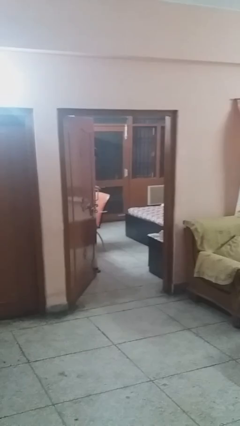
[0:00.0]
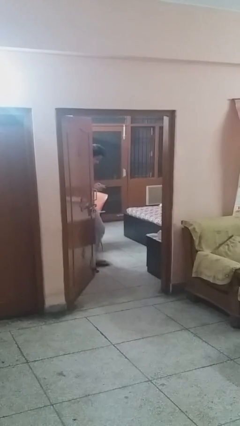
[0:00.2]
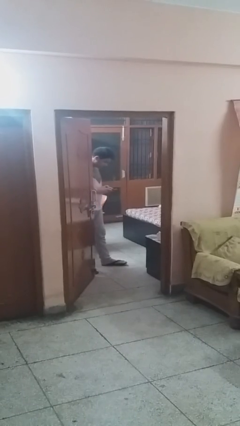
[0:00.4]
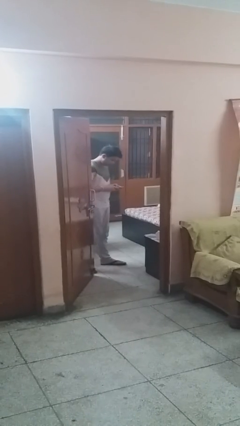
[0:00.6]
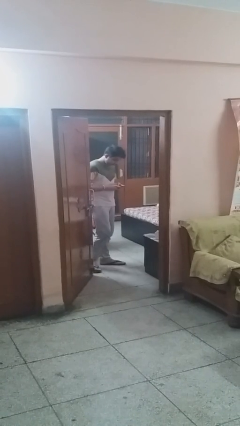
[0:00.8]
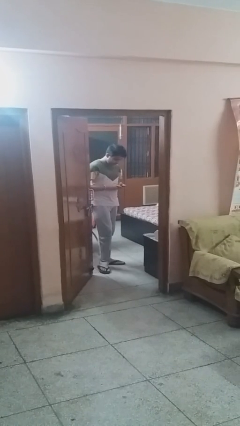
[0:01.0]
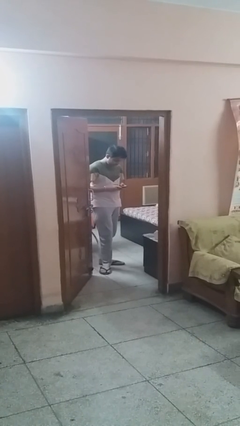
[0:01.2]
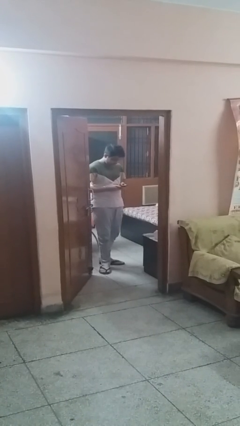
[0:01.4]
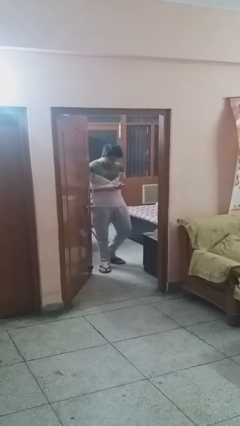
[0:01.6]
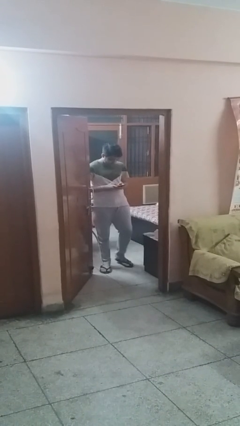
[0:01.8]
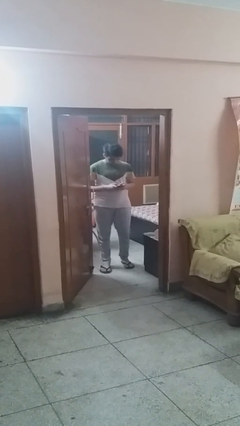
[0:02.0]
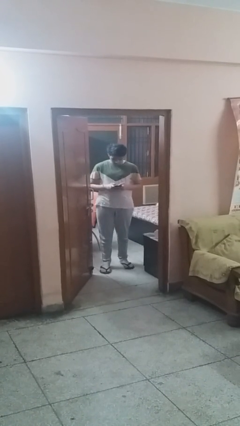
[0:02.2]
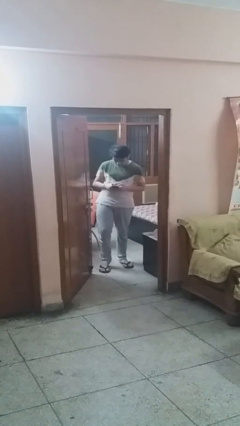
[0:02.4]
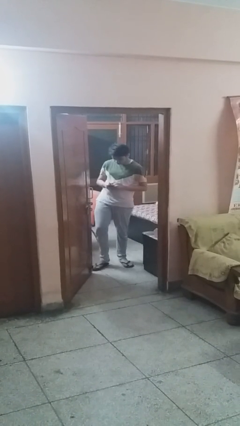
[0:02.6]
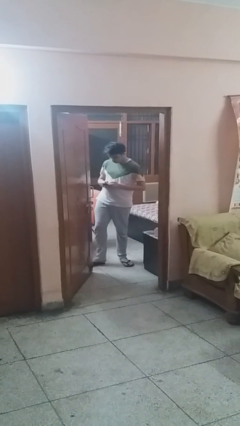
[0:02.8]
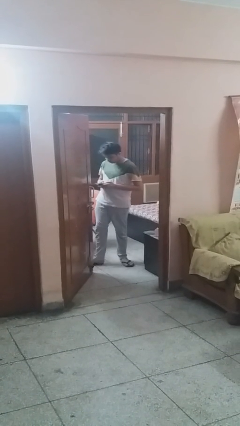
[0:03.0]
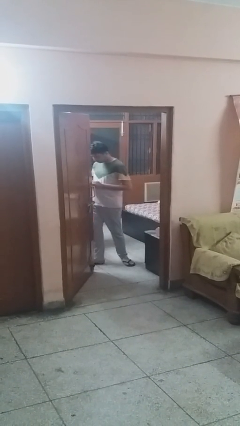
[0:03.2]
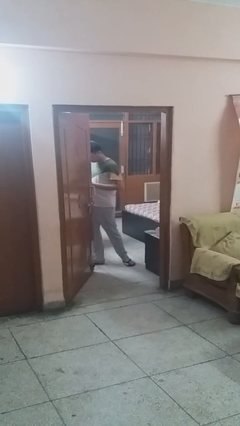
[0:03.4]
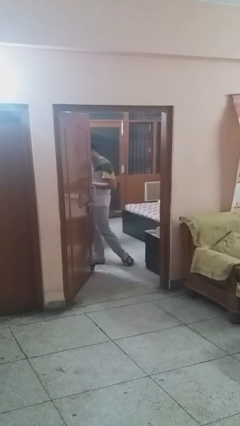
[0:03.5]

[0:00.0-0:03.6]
person enters scene through structure

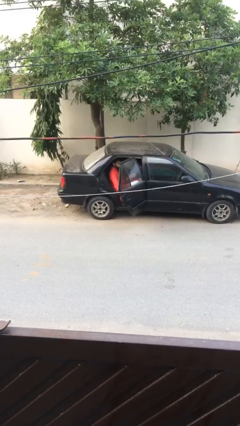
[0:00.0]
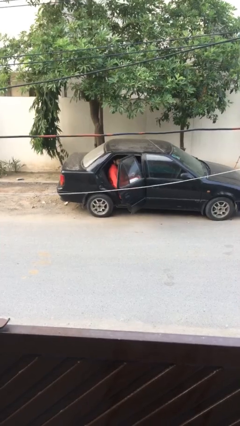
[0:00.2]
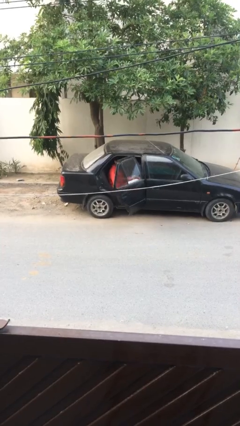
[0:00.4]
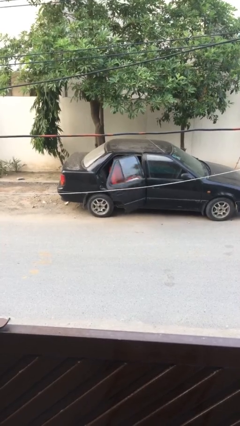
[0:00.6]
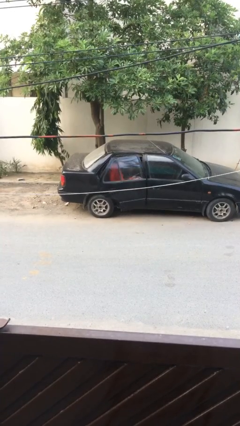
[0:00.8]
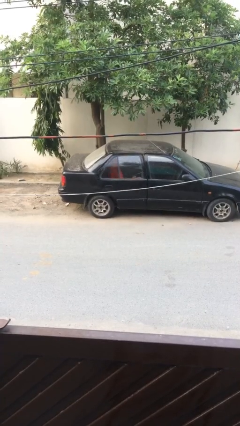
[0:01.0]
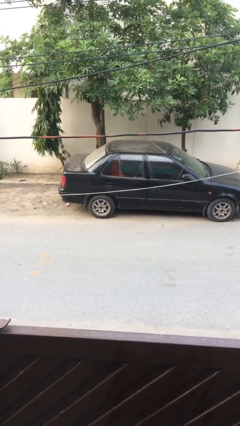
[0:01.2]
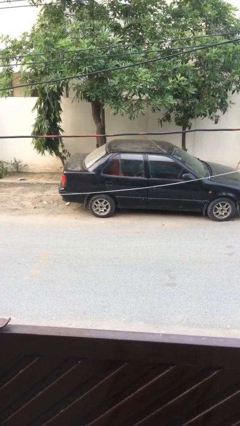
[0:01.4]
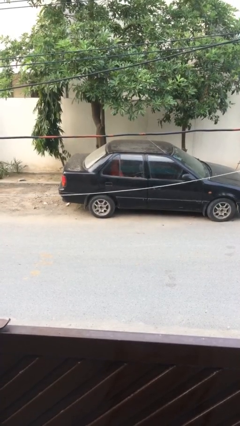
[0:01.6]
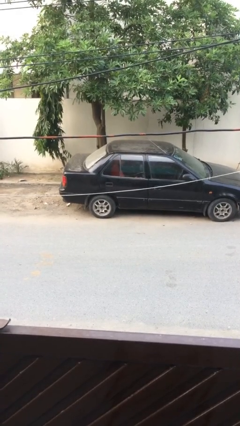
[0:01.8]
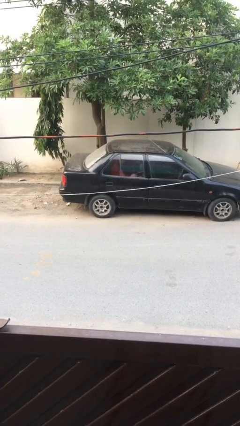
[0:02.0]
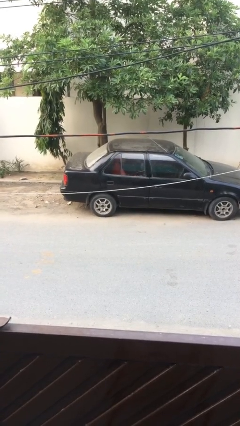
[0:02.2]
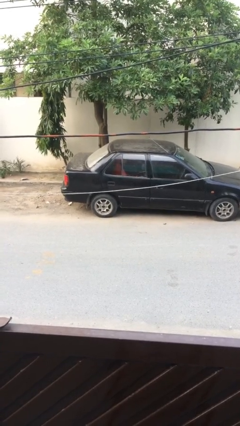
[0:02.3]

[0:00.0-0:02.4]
person closes car door

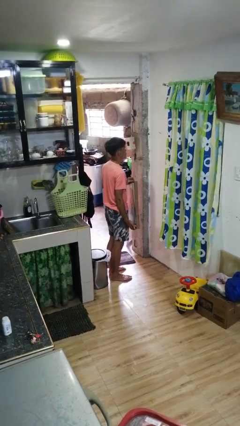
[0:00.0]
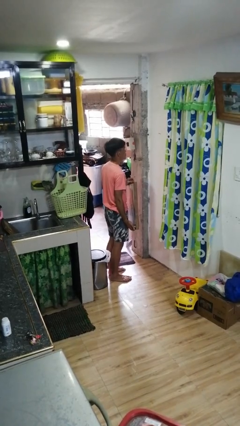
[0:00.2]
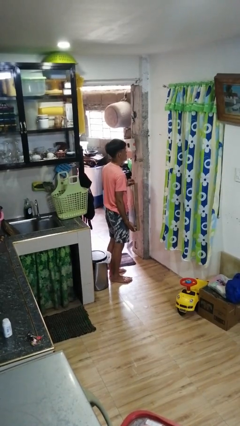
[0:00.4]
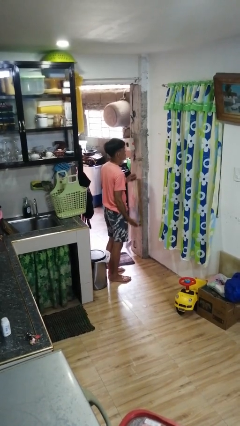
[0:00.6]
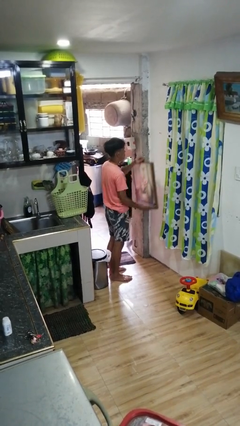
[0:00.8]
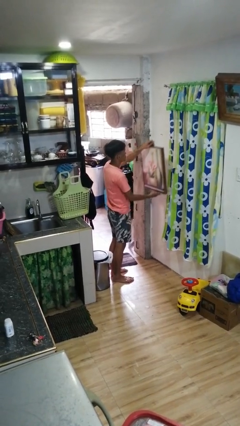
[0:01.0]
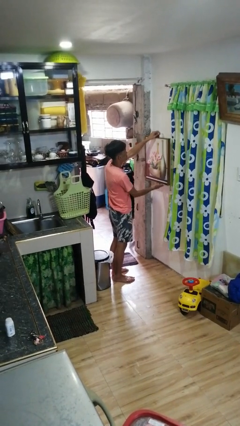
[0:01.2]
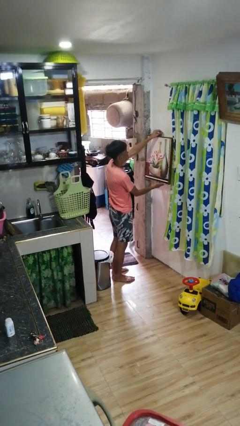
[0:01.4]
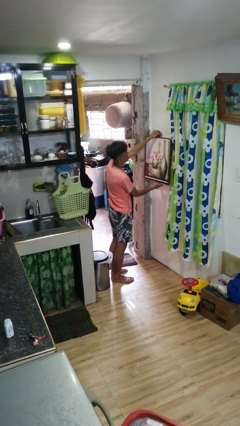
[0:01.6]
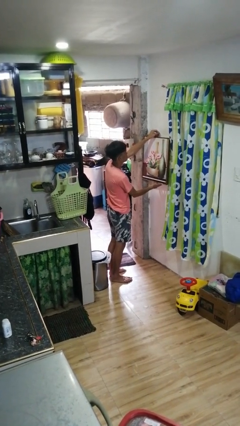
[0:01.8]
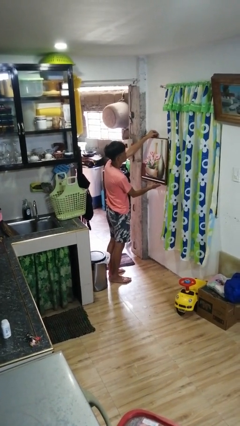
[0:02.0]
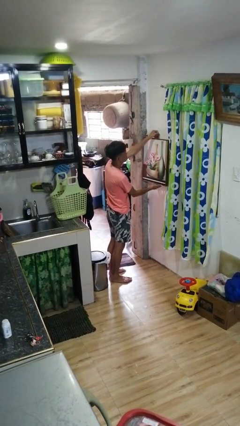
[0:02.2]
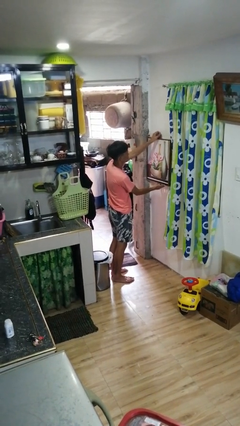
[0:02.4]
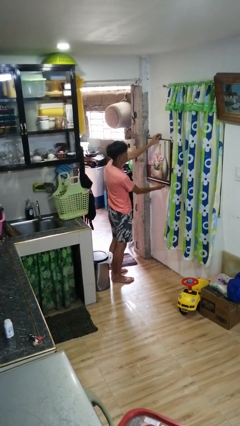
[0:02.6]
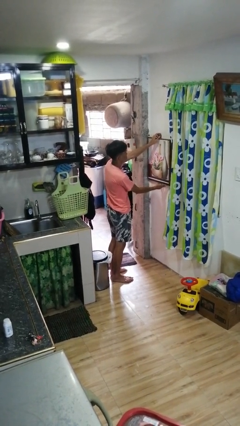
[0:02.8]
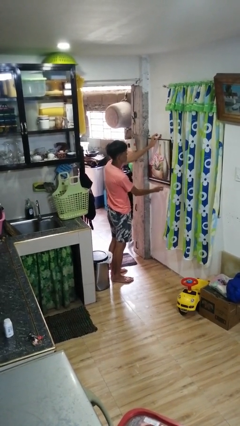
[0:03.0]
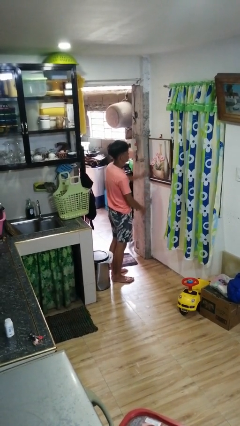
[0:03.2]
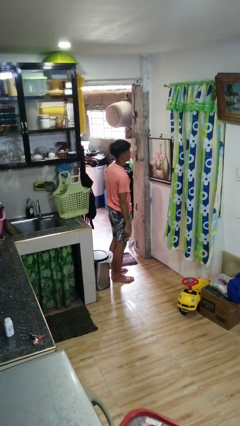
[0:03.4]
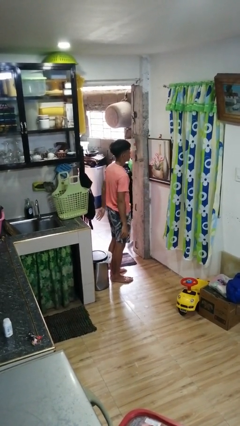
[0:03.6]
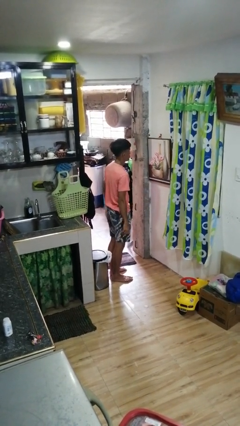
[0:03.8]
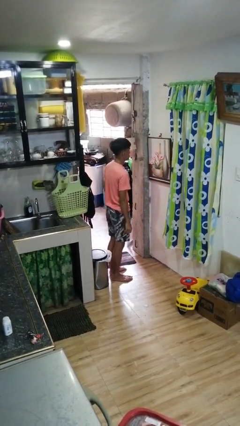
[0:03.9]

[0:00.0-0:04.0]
person puts up picture frame

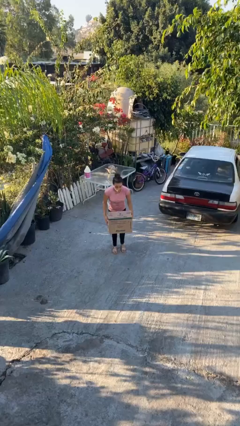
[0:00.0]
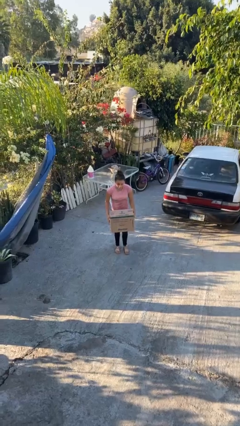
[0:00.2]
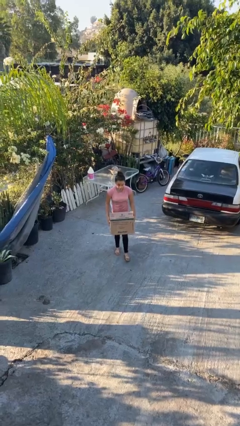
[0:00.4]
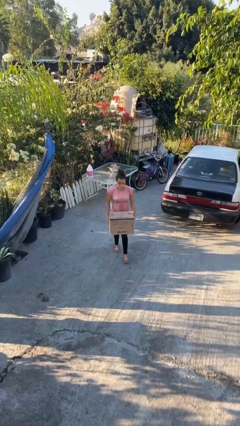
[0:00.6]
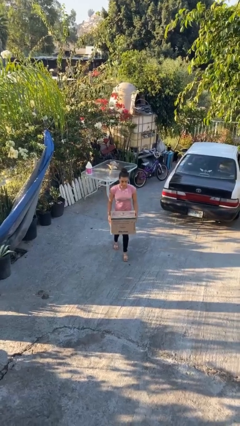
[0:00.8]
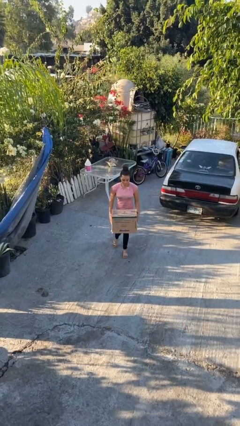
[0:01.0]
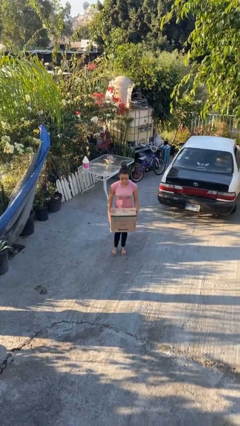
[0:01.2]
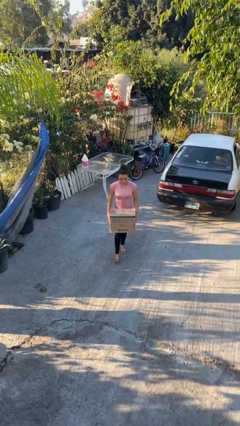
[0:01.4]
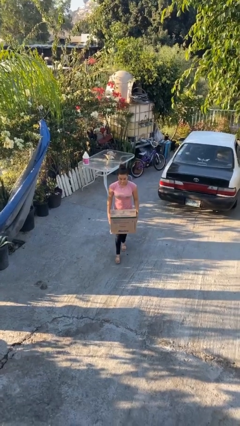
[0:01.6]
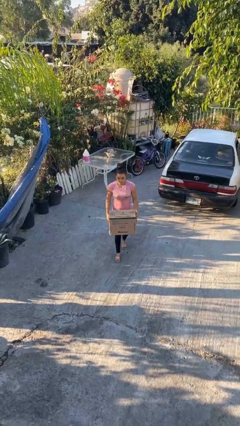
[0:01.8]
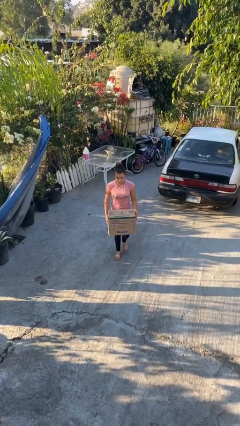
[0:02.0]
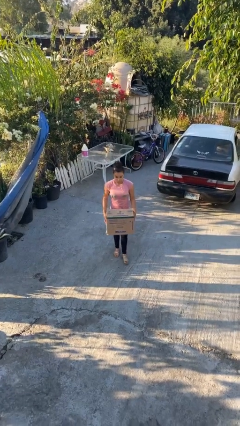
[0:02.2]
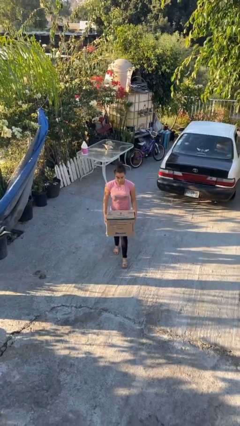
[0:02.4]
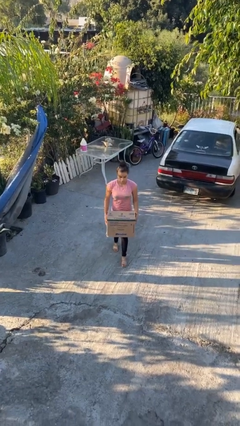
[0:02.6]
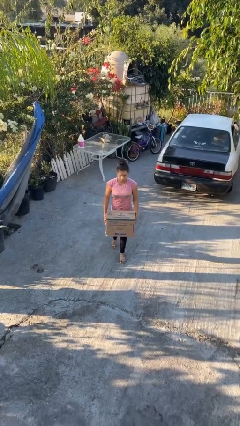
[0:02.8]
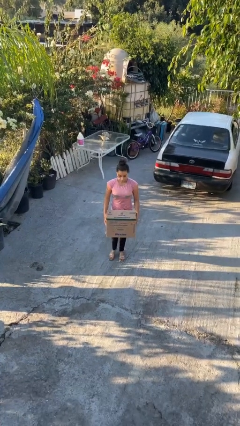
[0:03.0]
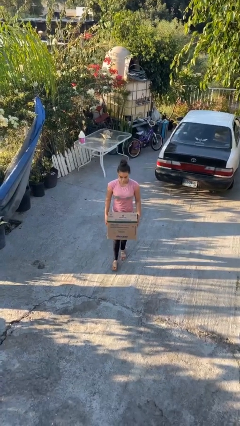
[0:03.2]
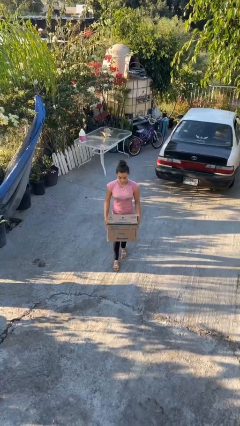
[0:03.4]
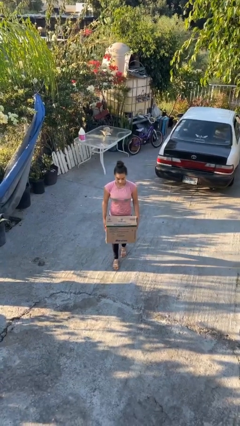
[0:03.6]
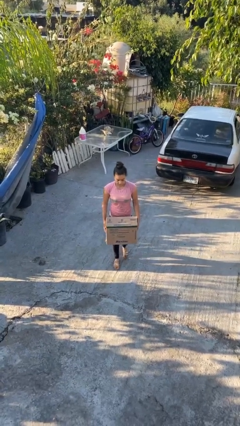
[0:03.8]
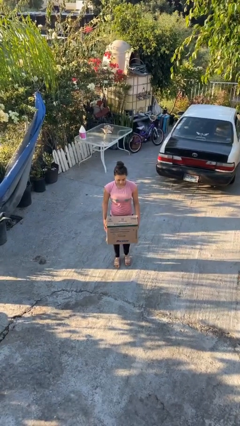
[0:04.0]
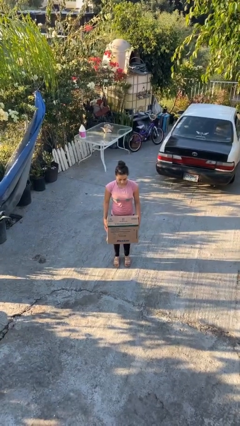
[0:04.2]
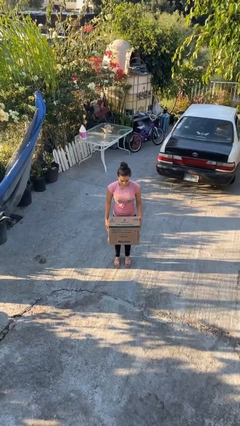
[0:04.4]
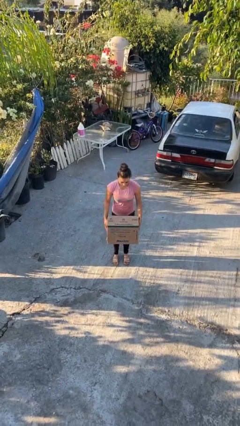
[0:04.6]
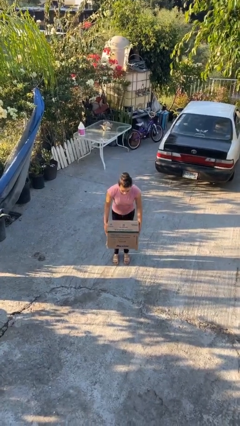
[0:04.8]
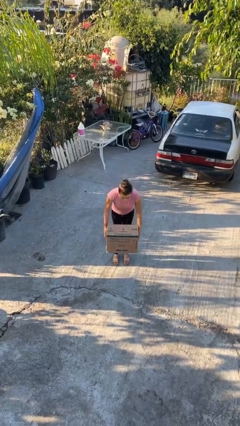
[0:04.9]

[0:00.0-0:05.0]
person carries heavy object

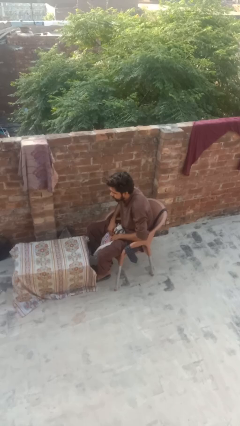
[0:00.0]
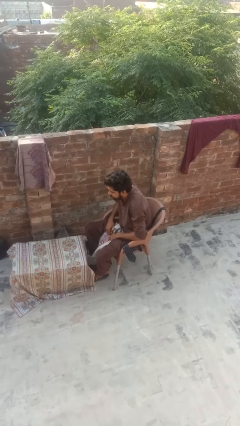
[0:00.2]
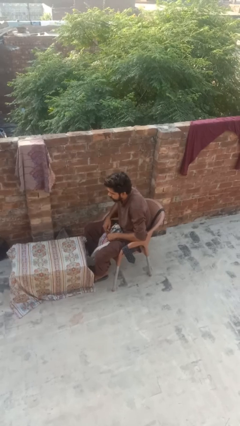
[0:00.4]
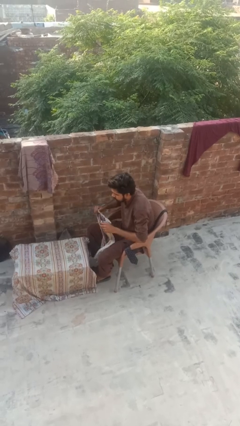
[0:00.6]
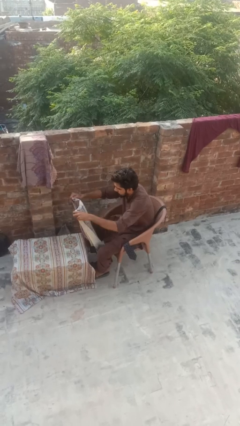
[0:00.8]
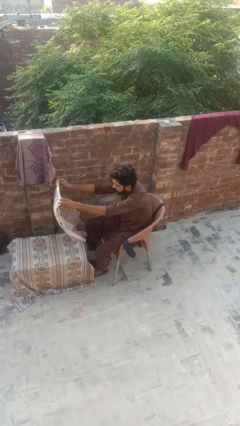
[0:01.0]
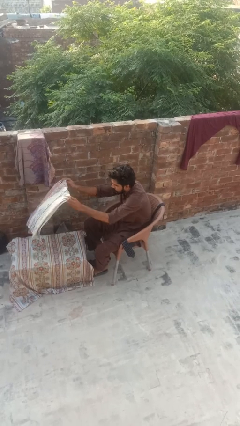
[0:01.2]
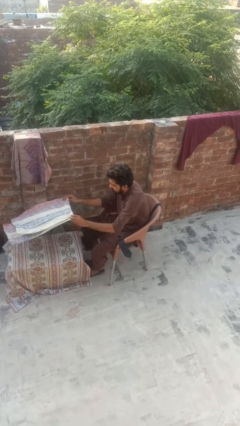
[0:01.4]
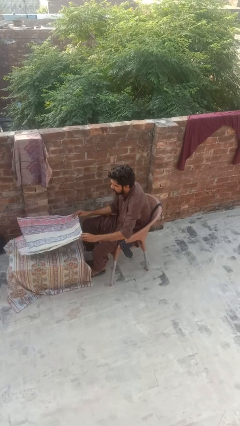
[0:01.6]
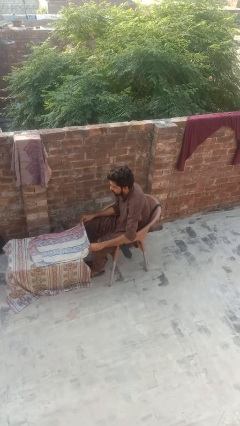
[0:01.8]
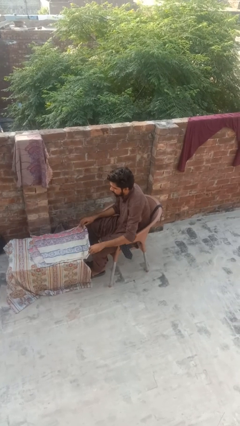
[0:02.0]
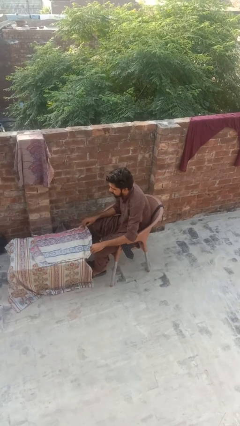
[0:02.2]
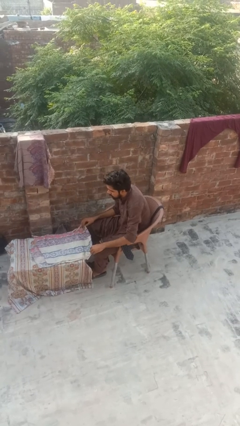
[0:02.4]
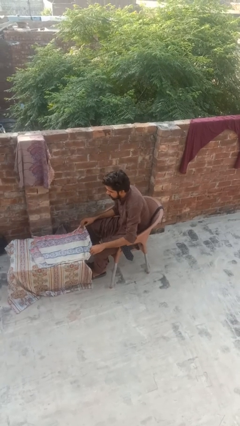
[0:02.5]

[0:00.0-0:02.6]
person spreads tablecloth
